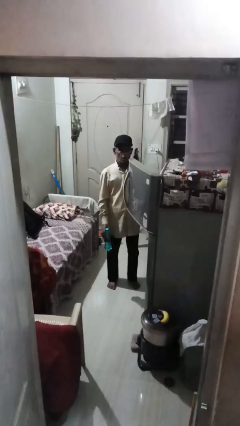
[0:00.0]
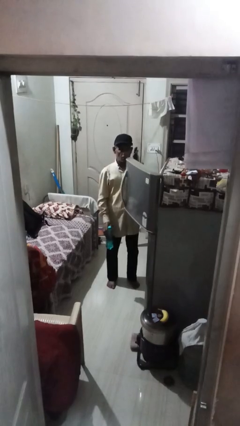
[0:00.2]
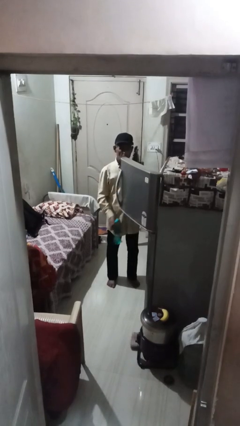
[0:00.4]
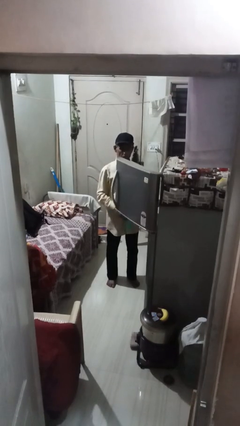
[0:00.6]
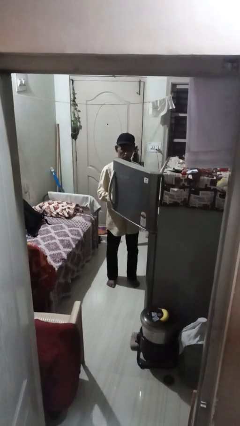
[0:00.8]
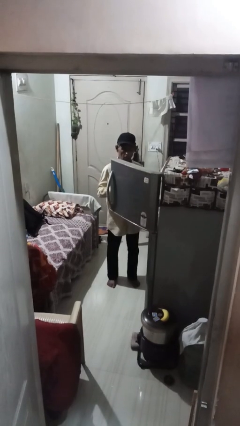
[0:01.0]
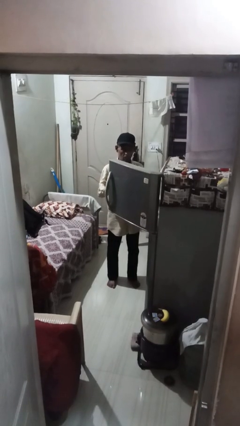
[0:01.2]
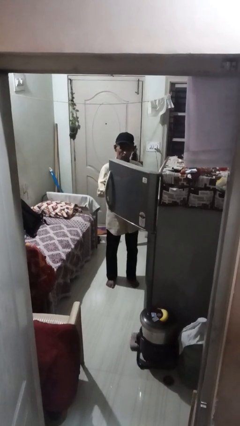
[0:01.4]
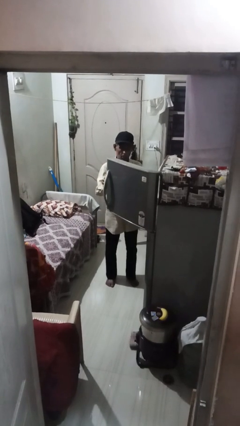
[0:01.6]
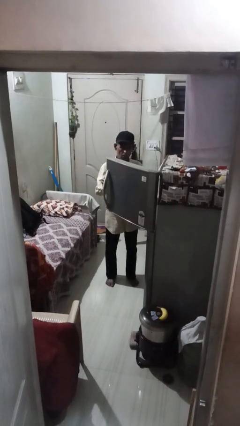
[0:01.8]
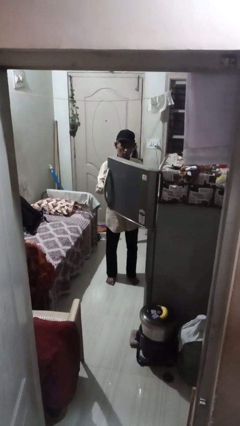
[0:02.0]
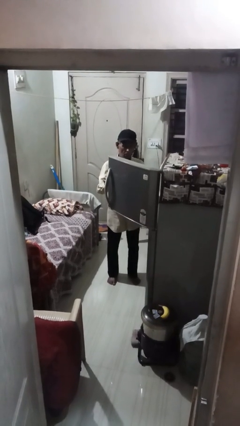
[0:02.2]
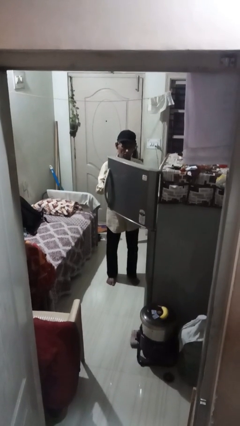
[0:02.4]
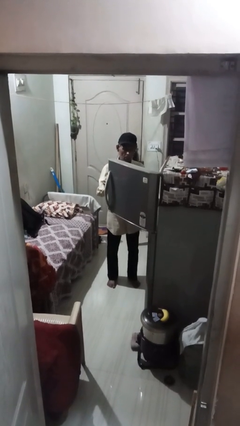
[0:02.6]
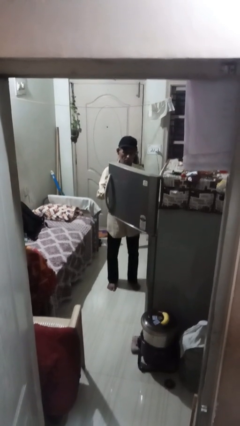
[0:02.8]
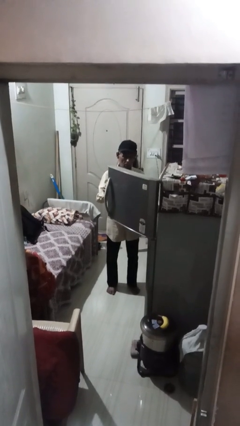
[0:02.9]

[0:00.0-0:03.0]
person puts object into refrigerator

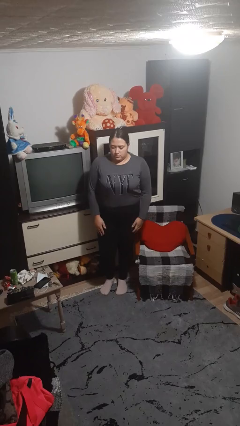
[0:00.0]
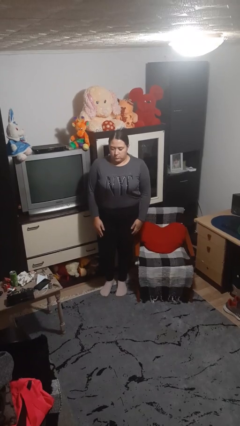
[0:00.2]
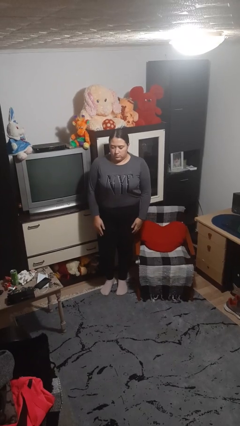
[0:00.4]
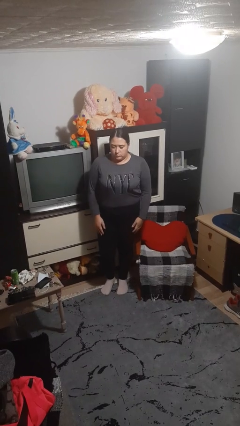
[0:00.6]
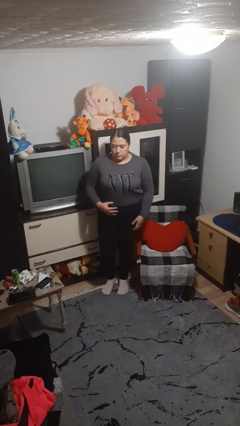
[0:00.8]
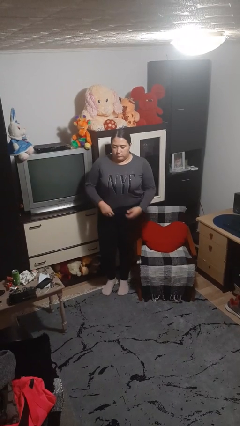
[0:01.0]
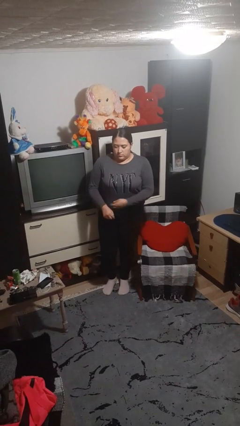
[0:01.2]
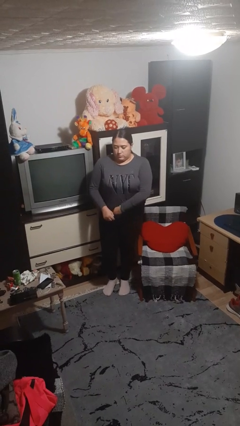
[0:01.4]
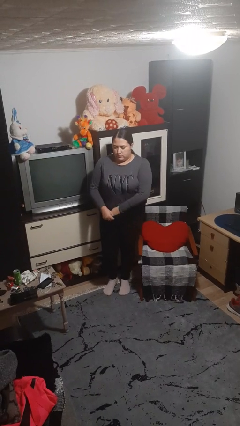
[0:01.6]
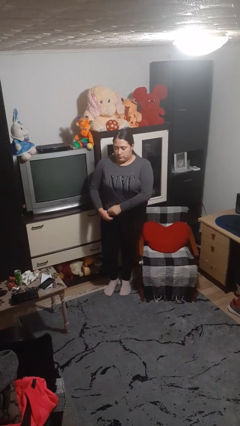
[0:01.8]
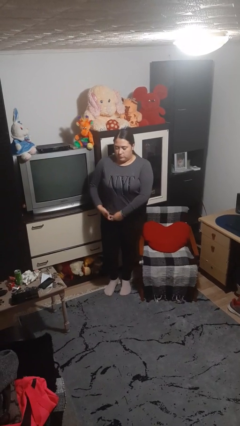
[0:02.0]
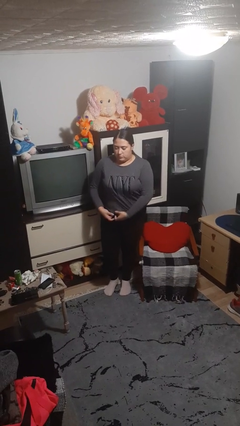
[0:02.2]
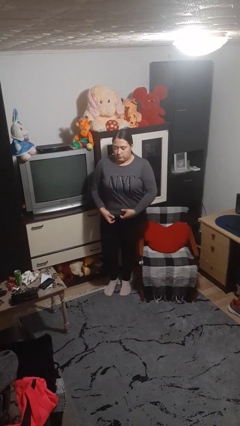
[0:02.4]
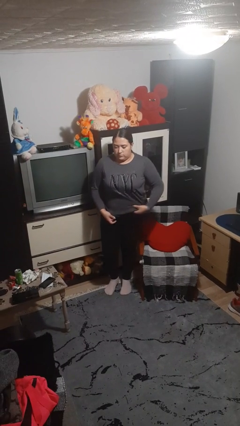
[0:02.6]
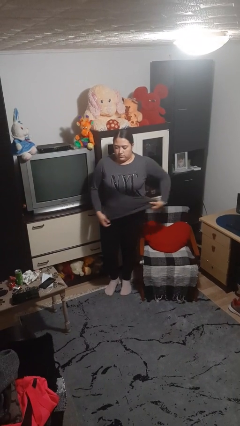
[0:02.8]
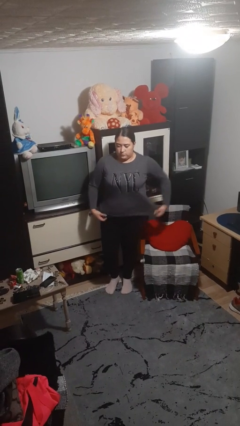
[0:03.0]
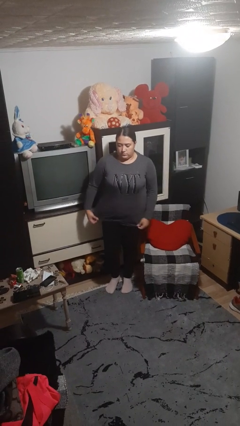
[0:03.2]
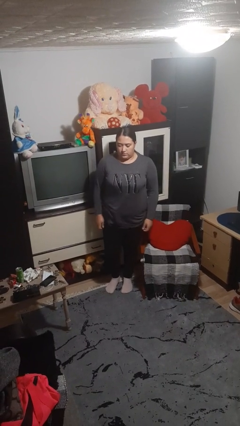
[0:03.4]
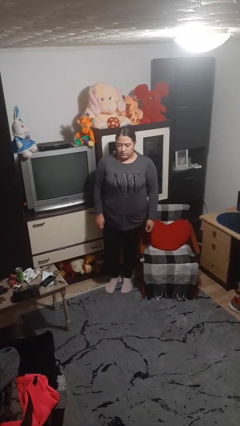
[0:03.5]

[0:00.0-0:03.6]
person untucks shirt

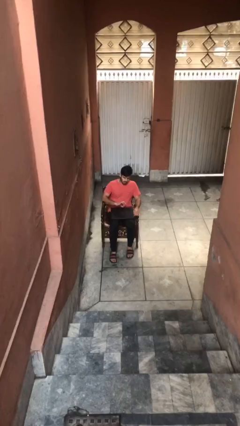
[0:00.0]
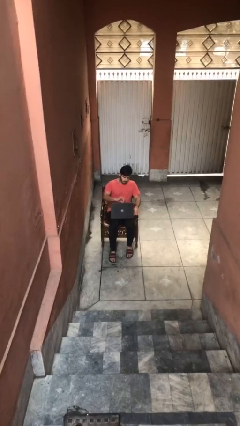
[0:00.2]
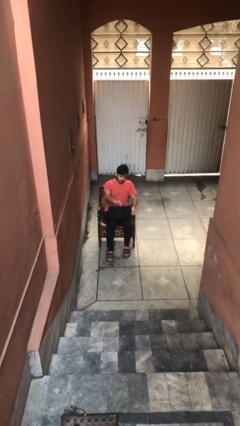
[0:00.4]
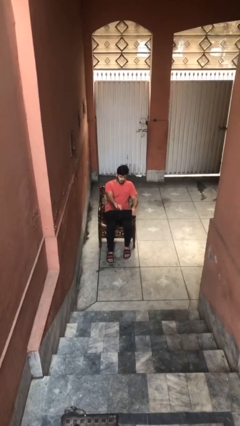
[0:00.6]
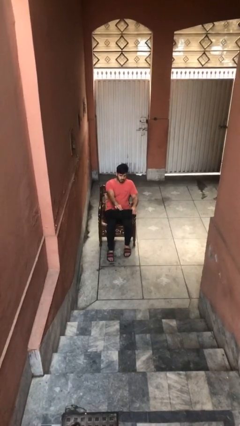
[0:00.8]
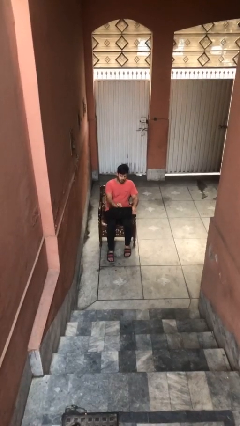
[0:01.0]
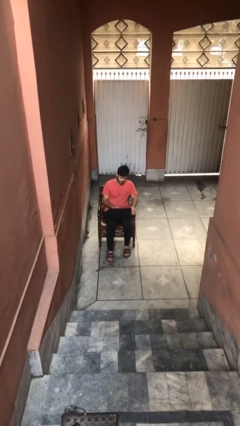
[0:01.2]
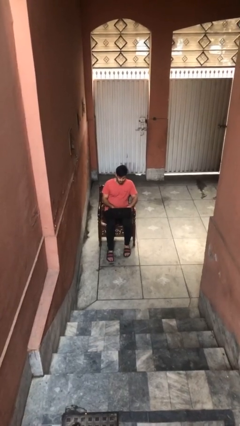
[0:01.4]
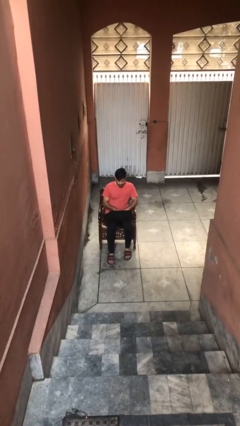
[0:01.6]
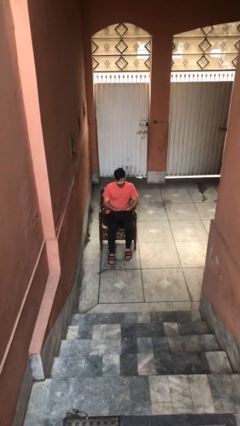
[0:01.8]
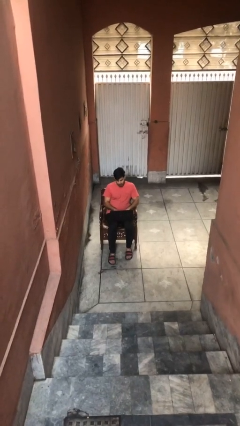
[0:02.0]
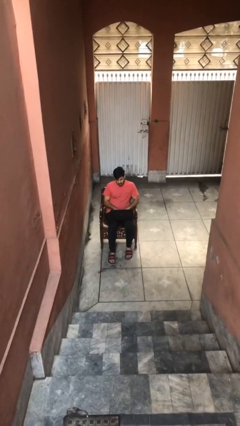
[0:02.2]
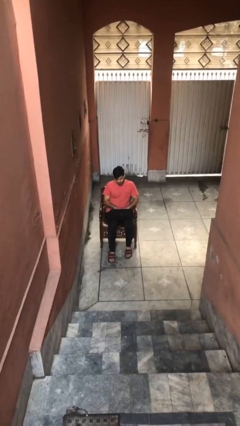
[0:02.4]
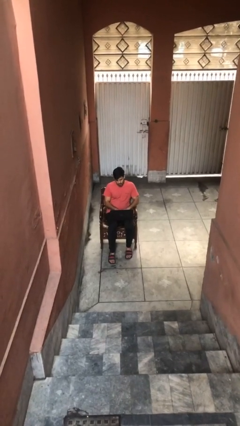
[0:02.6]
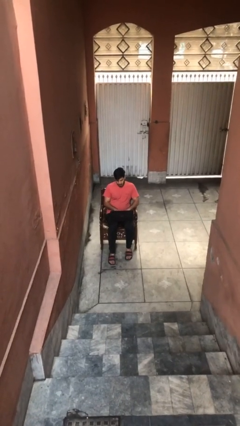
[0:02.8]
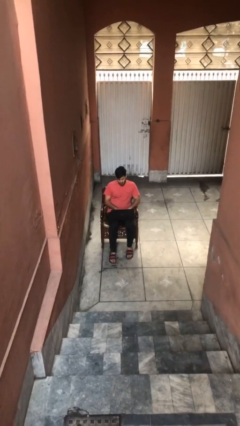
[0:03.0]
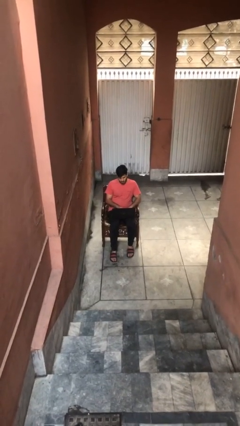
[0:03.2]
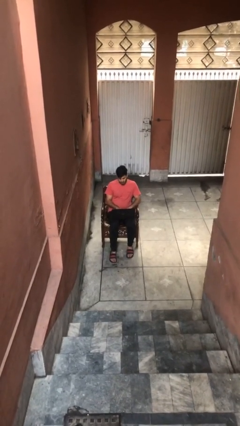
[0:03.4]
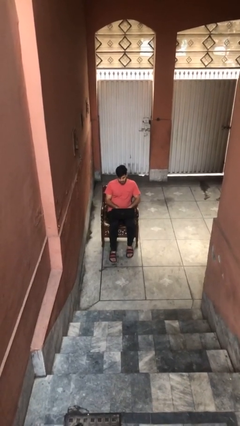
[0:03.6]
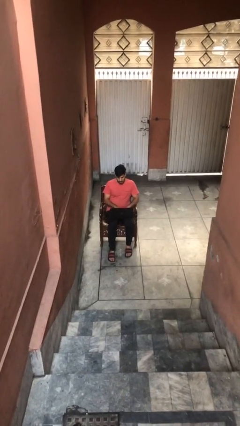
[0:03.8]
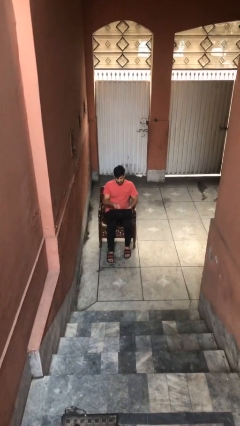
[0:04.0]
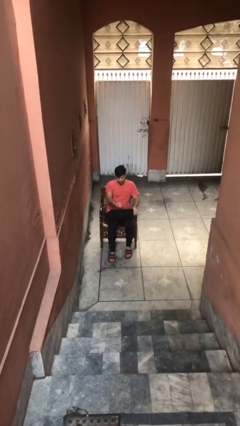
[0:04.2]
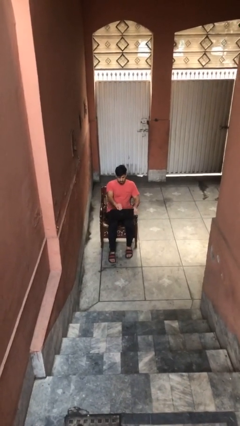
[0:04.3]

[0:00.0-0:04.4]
person interacts with laptop

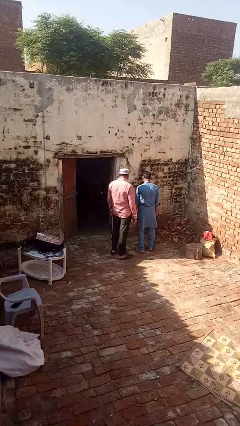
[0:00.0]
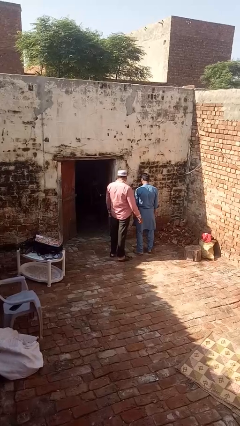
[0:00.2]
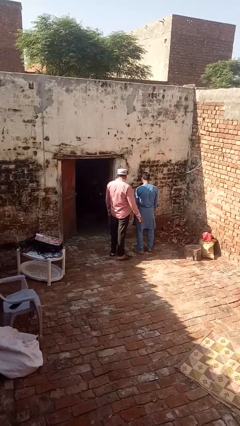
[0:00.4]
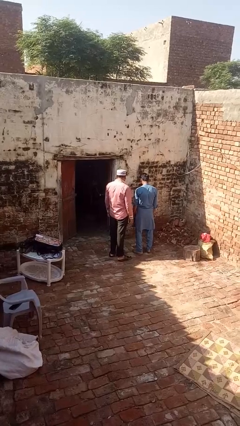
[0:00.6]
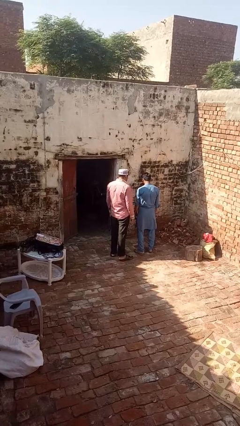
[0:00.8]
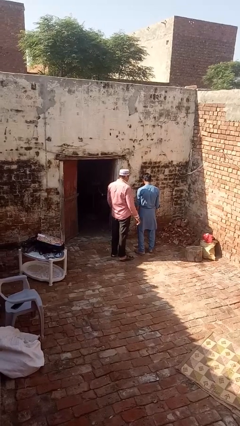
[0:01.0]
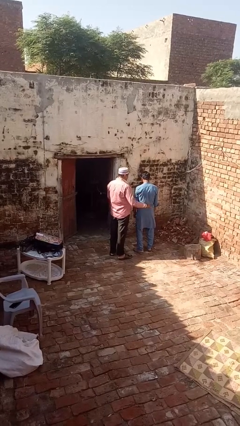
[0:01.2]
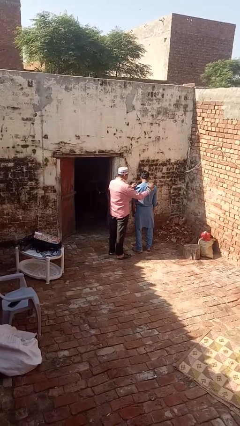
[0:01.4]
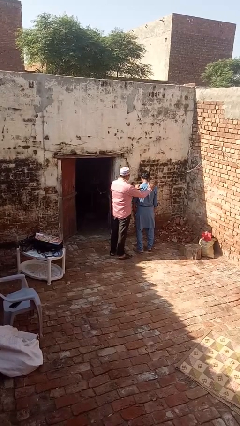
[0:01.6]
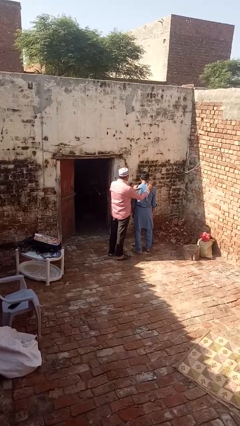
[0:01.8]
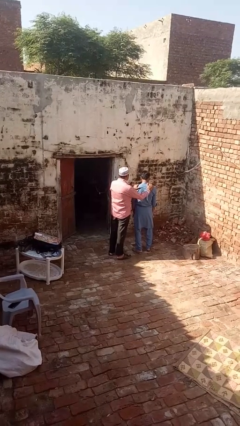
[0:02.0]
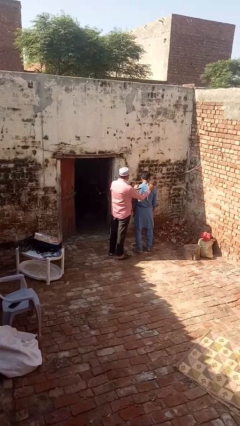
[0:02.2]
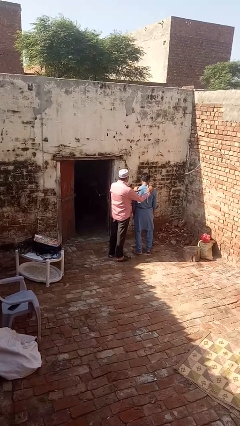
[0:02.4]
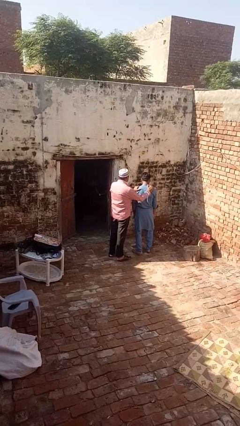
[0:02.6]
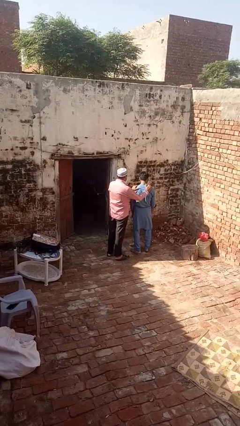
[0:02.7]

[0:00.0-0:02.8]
person grabs person by shoulder

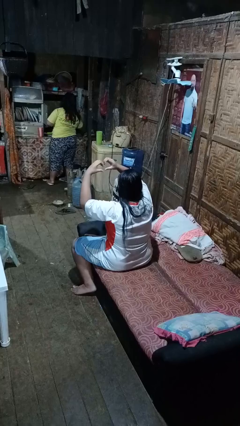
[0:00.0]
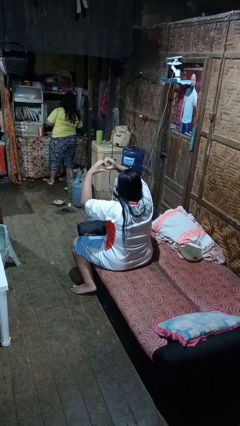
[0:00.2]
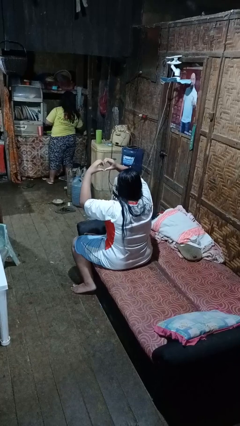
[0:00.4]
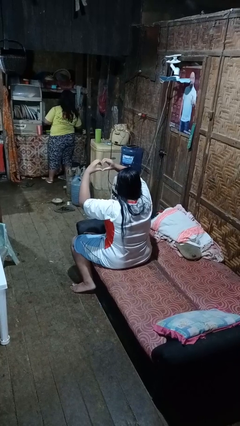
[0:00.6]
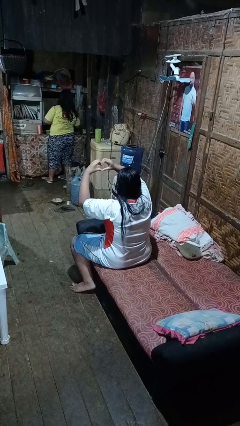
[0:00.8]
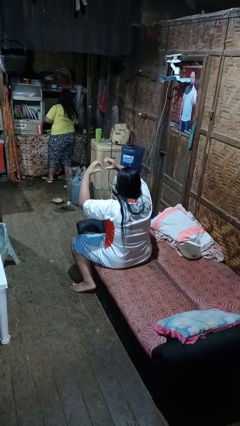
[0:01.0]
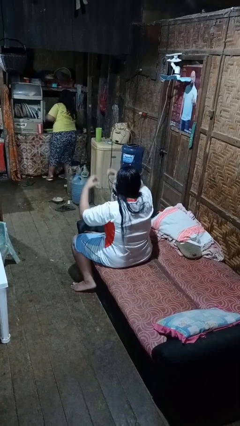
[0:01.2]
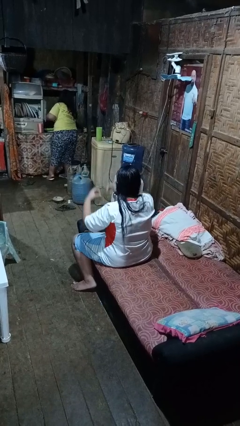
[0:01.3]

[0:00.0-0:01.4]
person gestures heart

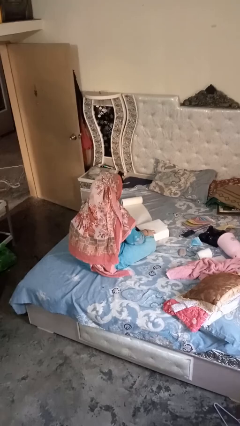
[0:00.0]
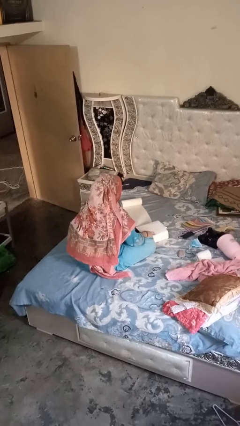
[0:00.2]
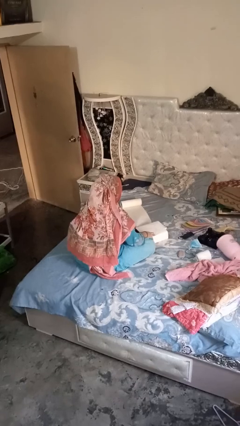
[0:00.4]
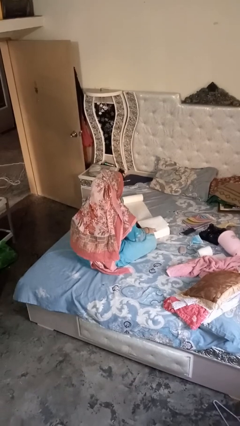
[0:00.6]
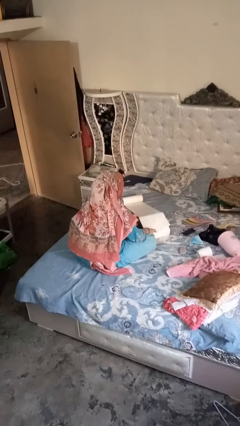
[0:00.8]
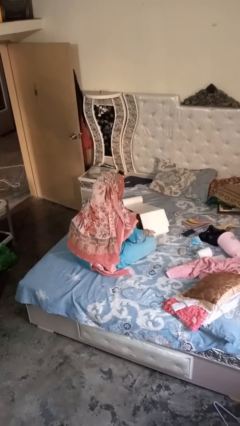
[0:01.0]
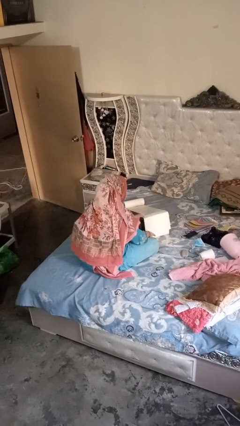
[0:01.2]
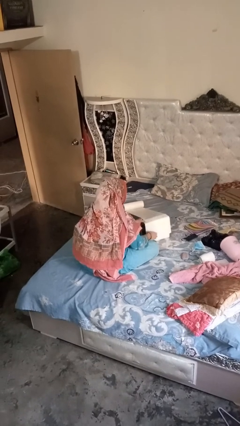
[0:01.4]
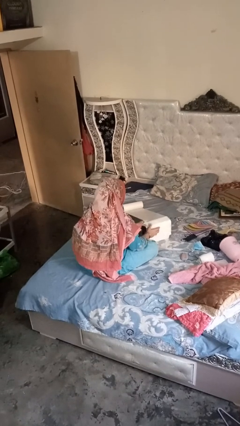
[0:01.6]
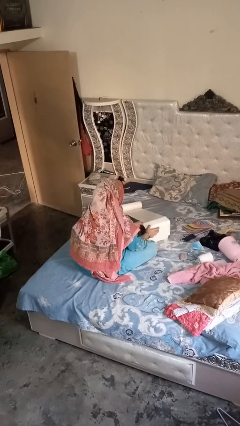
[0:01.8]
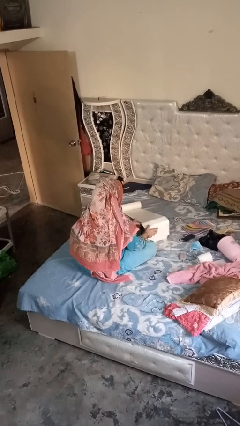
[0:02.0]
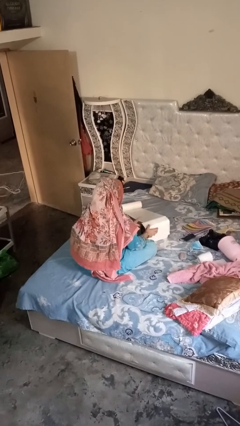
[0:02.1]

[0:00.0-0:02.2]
person wraps box

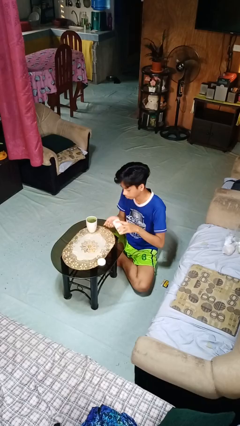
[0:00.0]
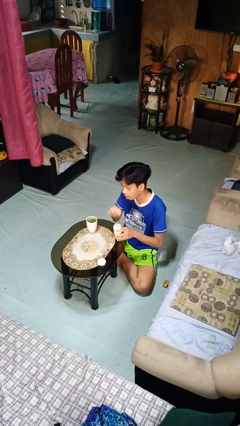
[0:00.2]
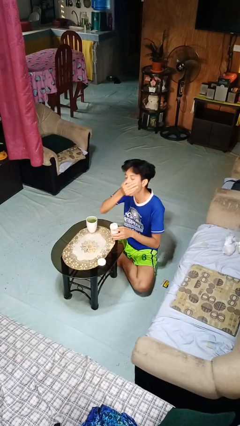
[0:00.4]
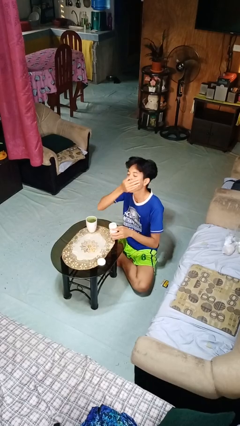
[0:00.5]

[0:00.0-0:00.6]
person takes medicine pills
